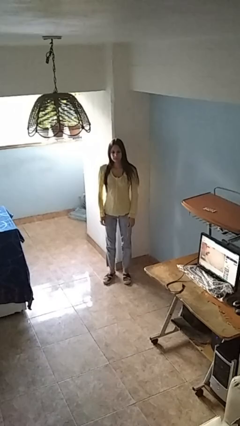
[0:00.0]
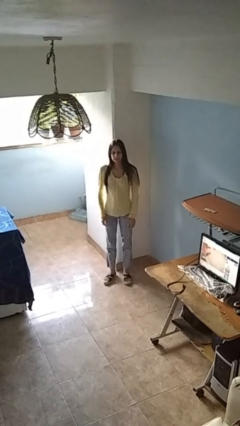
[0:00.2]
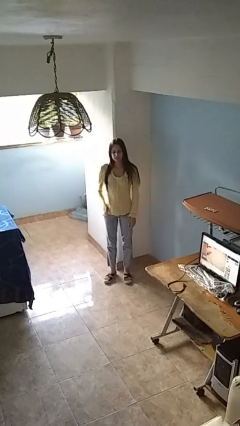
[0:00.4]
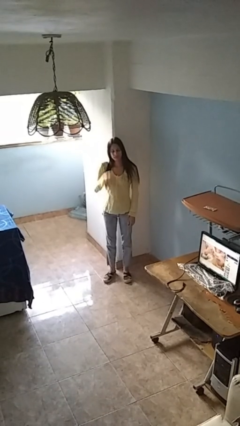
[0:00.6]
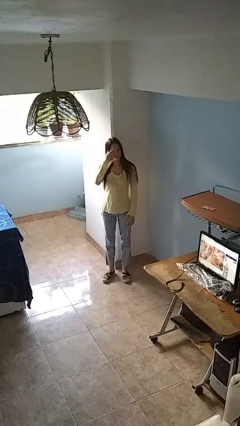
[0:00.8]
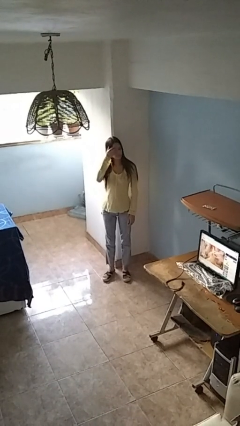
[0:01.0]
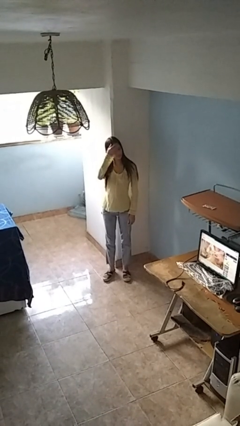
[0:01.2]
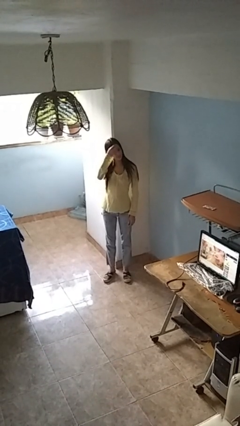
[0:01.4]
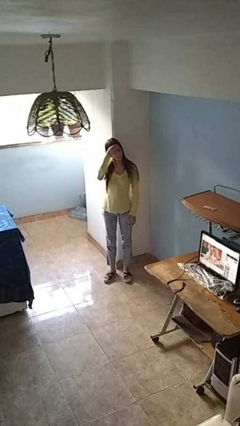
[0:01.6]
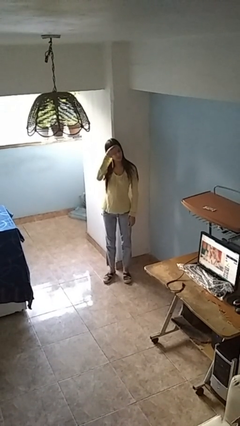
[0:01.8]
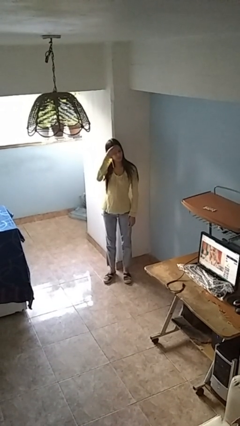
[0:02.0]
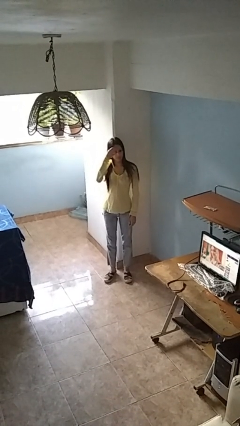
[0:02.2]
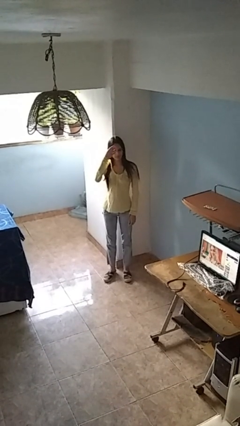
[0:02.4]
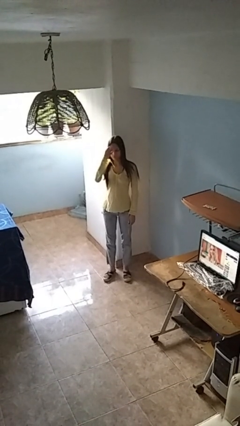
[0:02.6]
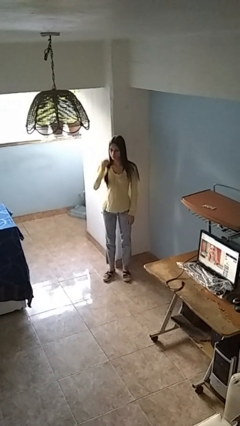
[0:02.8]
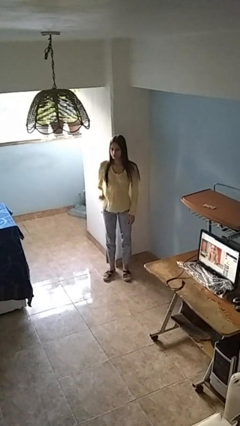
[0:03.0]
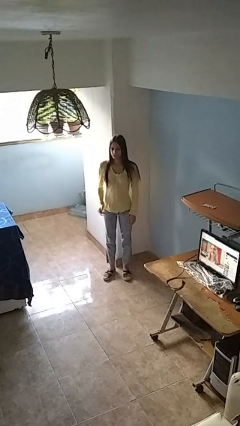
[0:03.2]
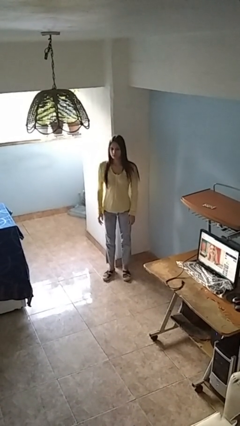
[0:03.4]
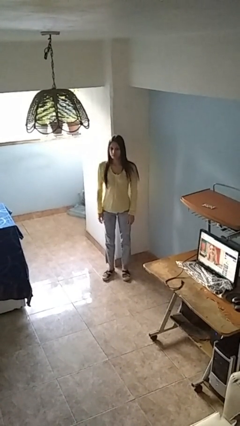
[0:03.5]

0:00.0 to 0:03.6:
person scratches face

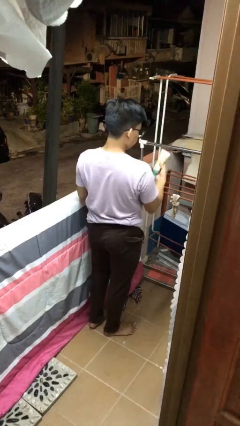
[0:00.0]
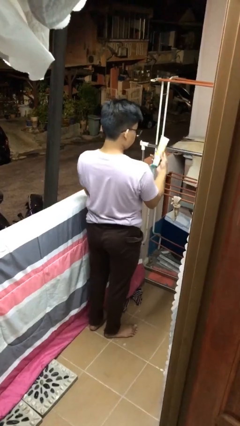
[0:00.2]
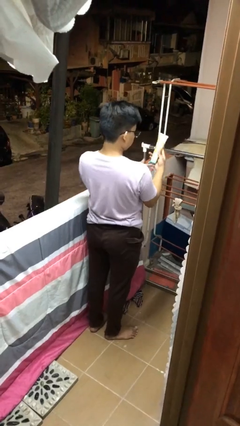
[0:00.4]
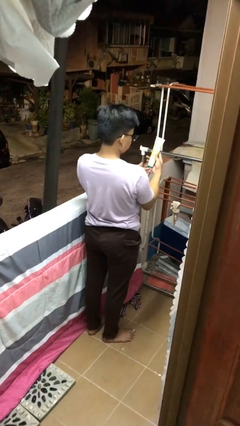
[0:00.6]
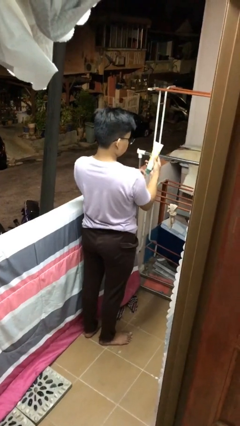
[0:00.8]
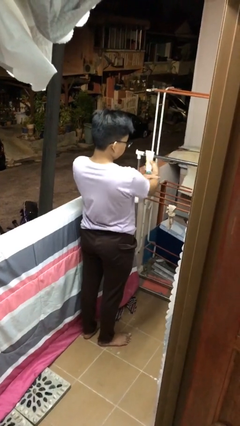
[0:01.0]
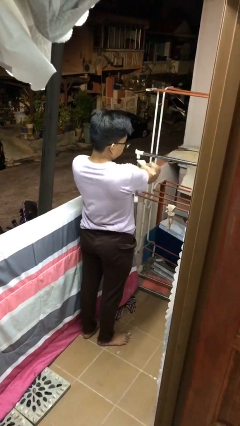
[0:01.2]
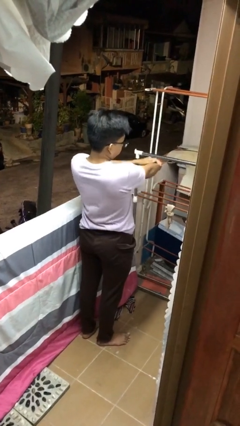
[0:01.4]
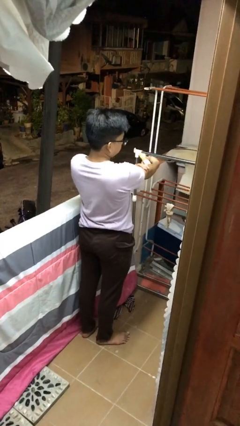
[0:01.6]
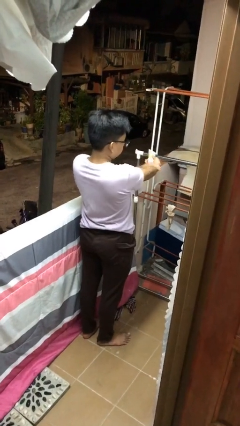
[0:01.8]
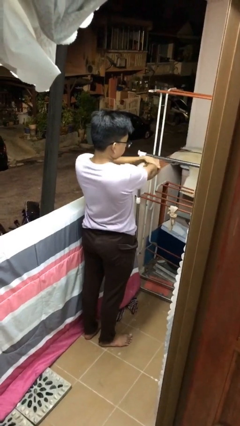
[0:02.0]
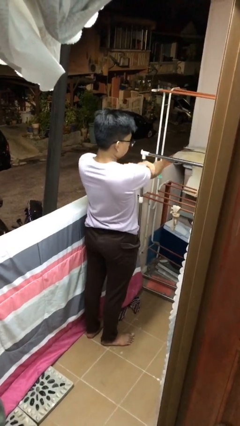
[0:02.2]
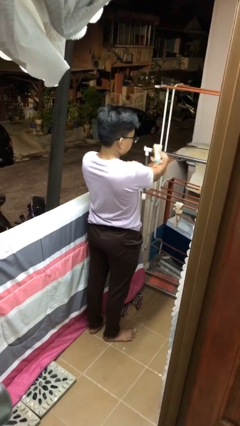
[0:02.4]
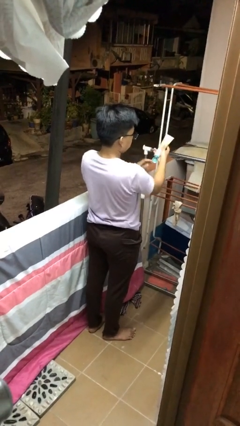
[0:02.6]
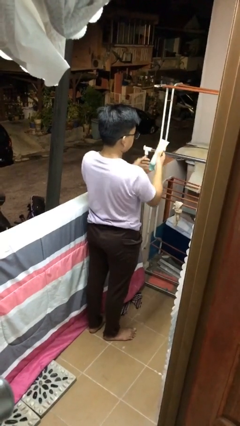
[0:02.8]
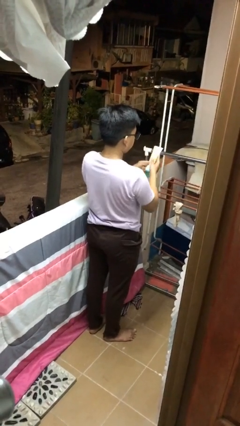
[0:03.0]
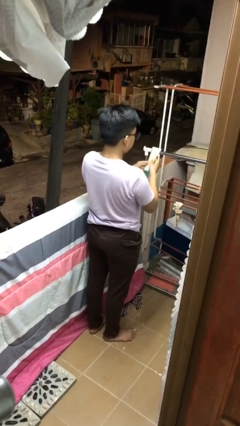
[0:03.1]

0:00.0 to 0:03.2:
person applies sunscreen

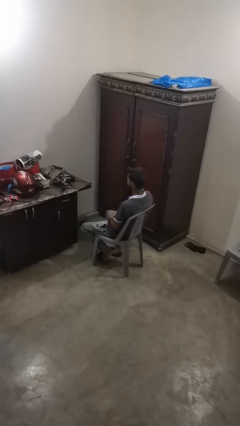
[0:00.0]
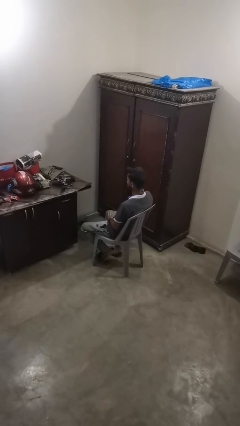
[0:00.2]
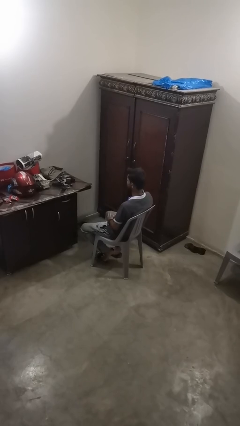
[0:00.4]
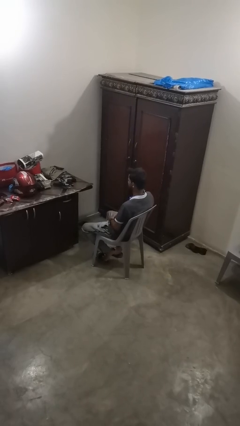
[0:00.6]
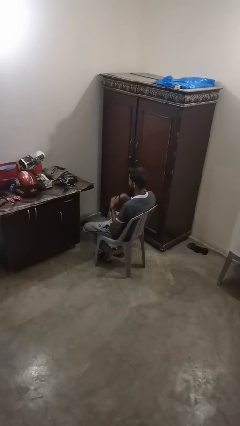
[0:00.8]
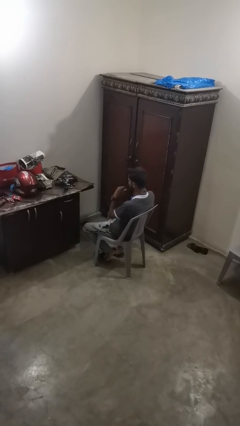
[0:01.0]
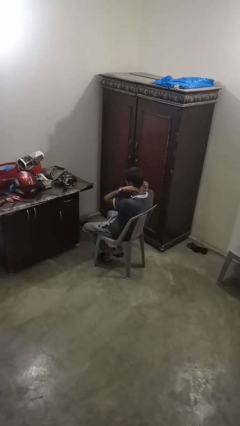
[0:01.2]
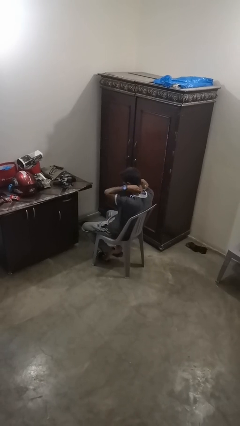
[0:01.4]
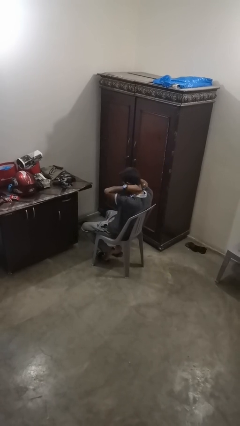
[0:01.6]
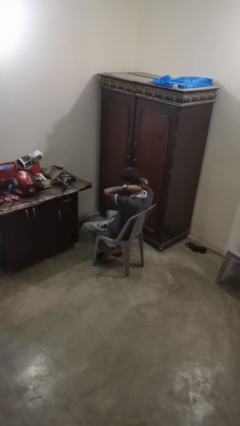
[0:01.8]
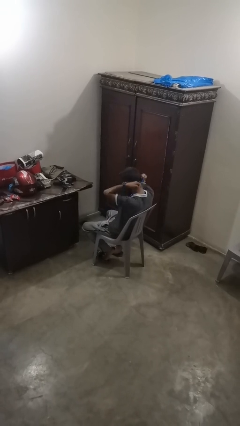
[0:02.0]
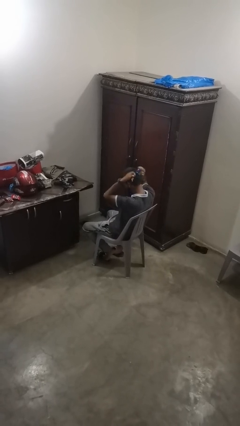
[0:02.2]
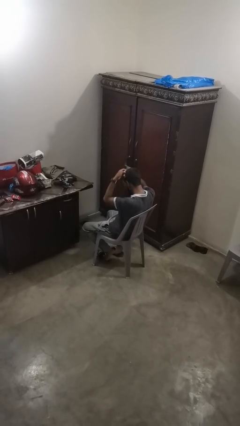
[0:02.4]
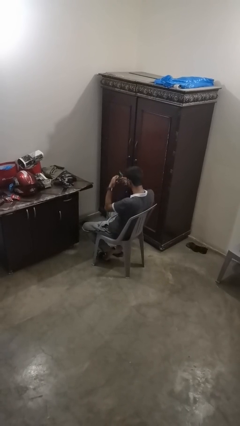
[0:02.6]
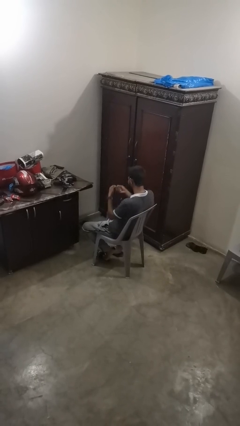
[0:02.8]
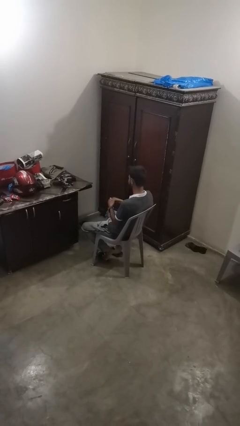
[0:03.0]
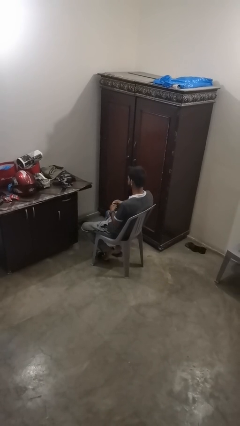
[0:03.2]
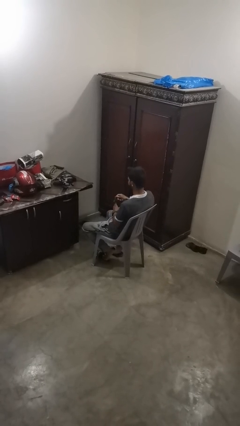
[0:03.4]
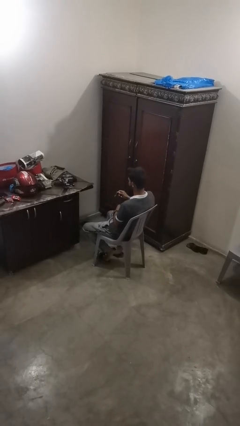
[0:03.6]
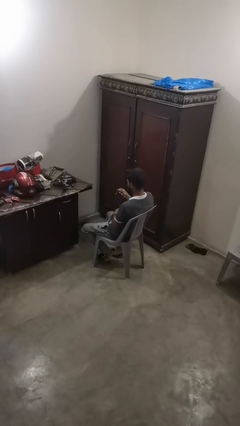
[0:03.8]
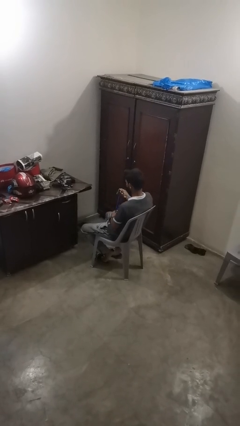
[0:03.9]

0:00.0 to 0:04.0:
person takes off necklace

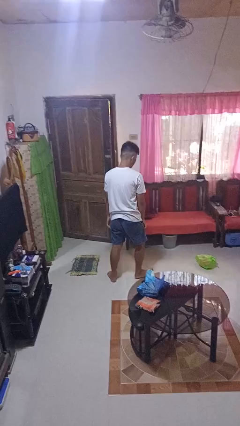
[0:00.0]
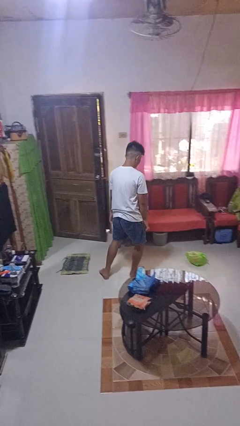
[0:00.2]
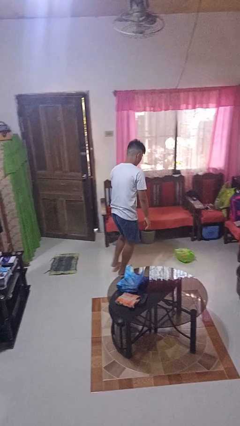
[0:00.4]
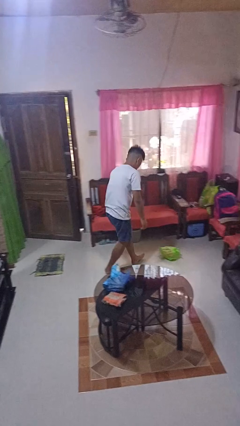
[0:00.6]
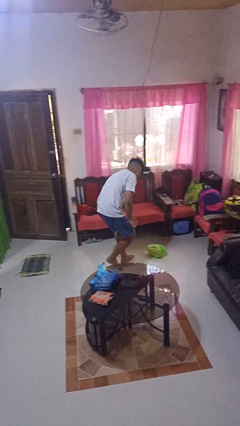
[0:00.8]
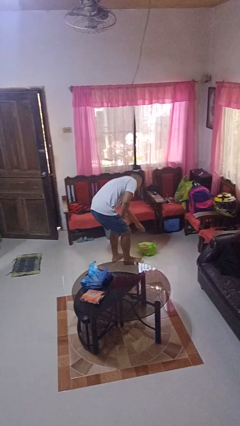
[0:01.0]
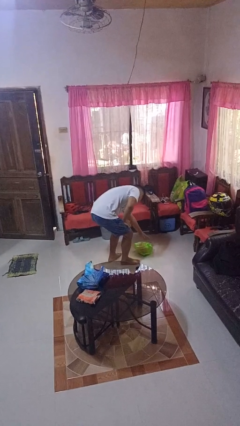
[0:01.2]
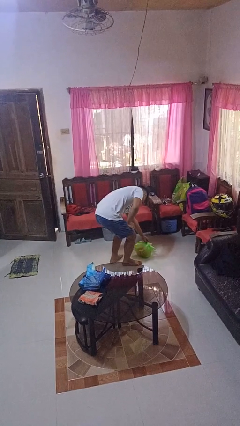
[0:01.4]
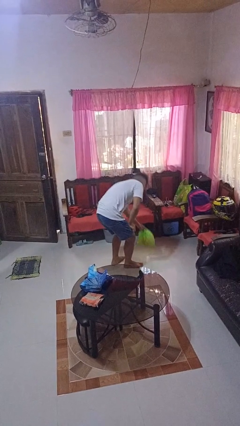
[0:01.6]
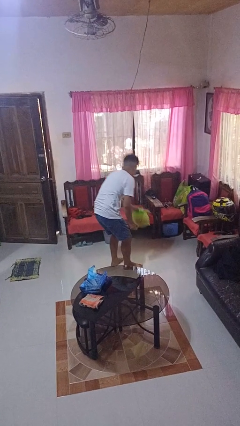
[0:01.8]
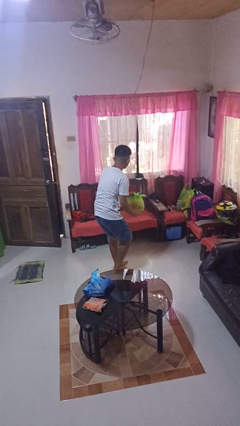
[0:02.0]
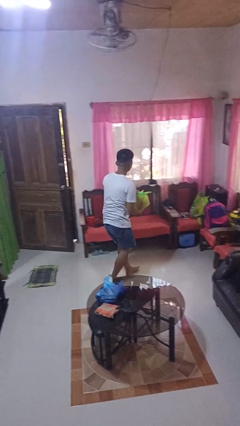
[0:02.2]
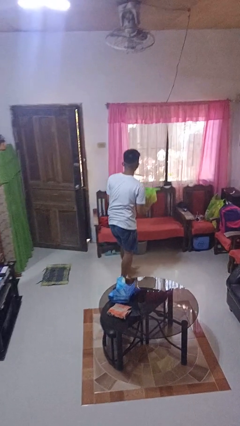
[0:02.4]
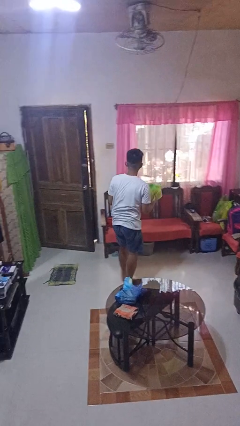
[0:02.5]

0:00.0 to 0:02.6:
person picks up object from floor

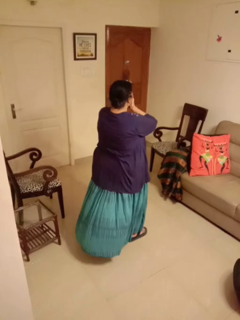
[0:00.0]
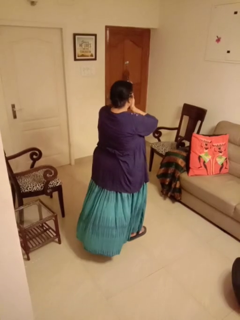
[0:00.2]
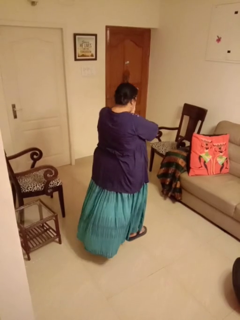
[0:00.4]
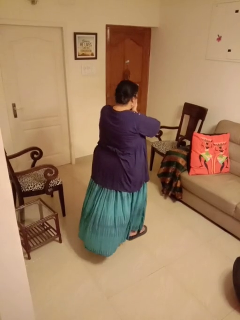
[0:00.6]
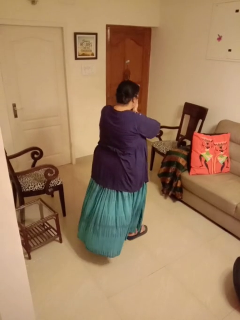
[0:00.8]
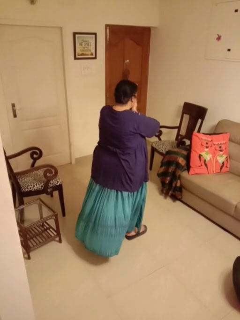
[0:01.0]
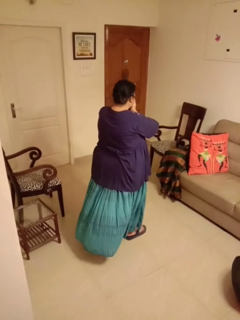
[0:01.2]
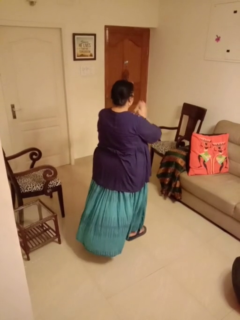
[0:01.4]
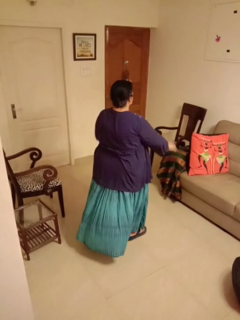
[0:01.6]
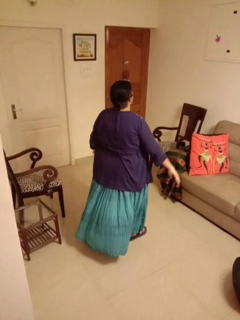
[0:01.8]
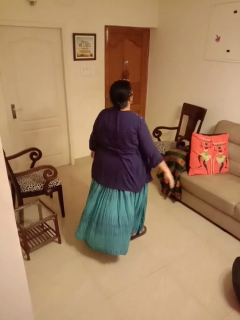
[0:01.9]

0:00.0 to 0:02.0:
person sneezes into hand

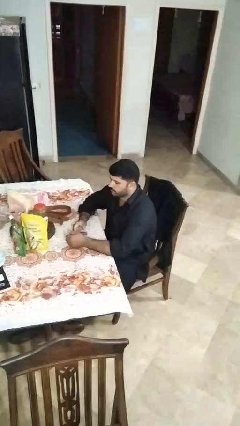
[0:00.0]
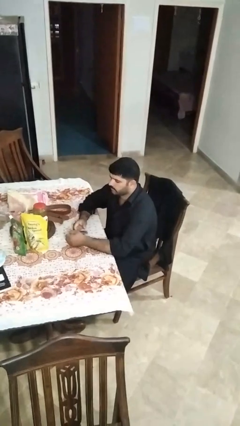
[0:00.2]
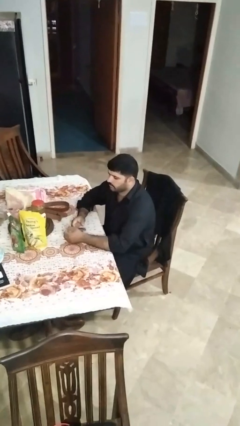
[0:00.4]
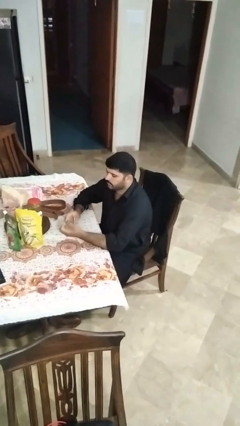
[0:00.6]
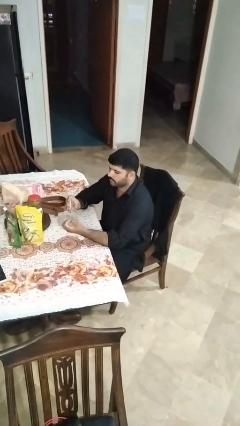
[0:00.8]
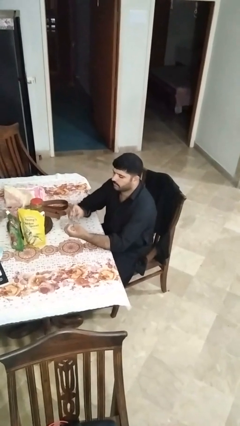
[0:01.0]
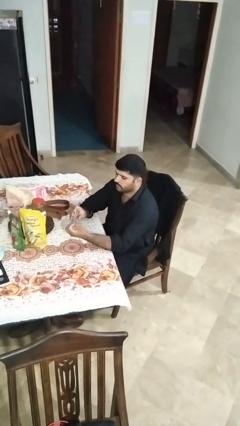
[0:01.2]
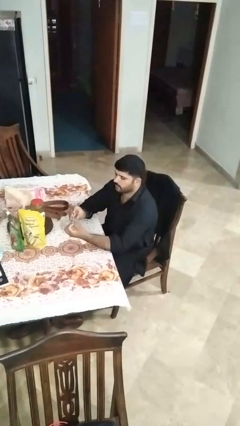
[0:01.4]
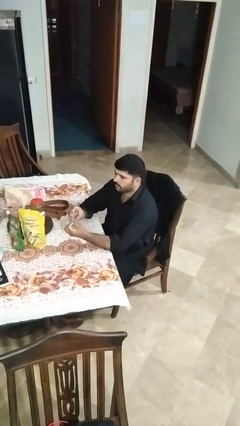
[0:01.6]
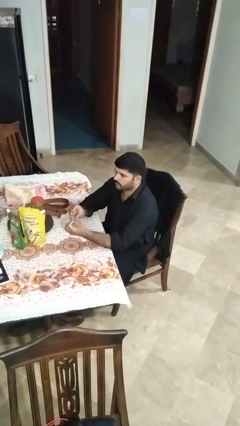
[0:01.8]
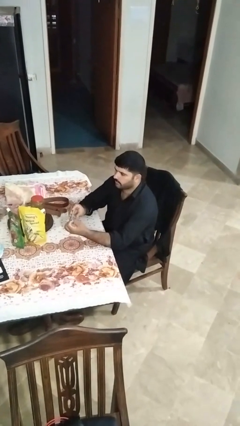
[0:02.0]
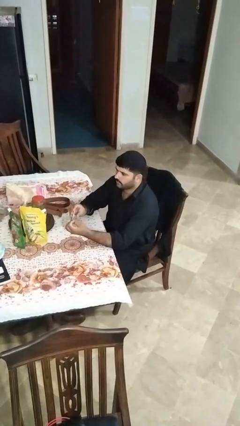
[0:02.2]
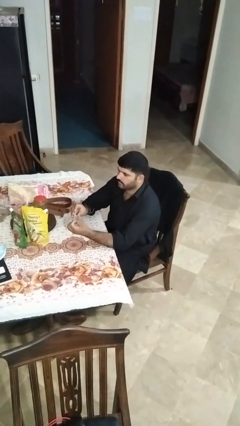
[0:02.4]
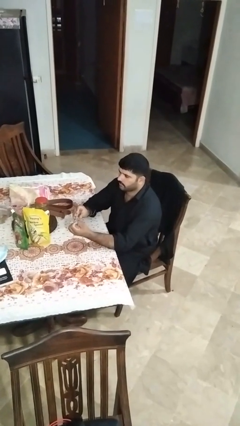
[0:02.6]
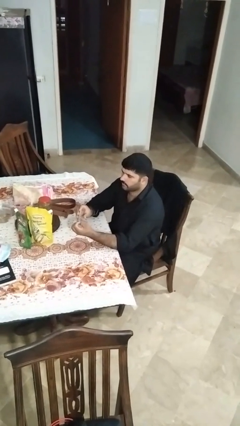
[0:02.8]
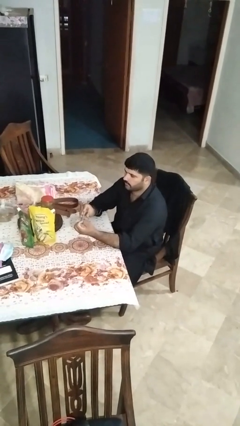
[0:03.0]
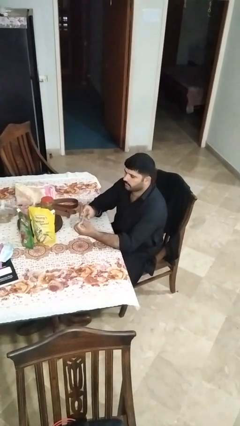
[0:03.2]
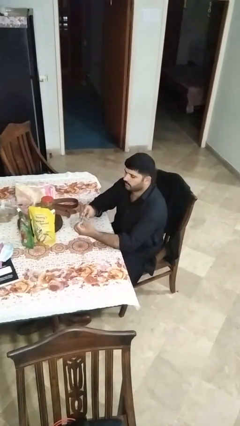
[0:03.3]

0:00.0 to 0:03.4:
person clips fingernails
